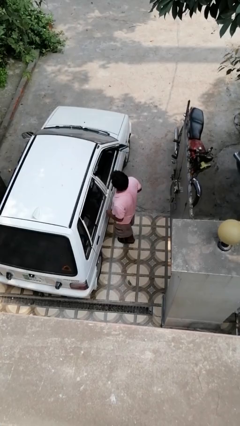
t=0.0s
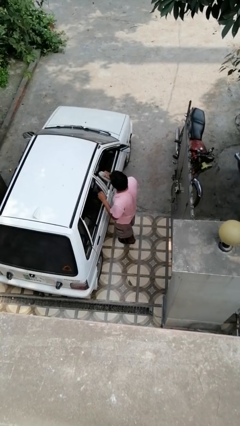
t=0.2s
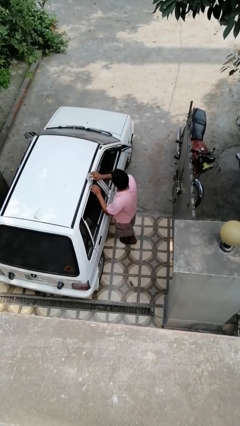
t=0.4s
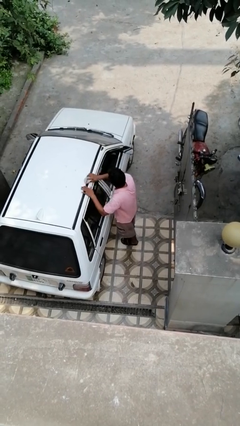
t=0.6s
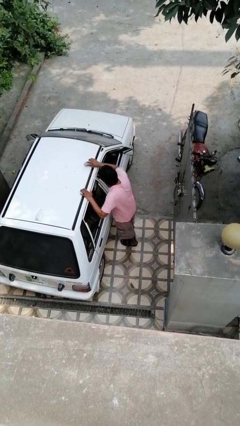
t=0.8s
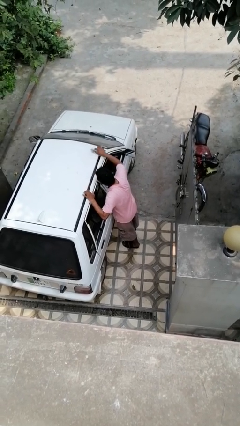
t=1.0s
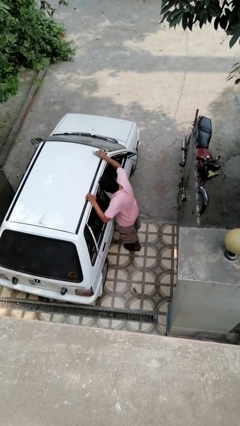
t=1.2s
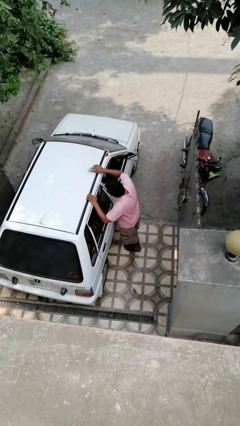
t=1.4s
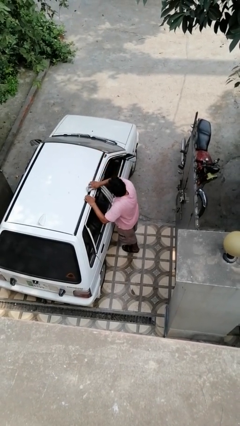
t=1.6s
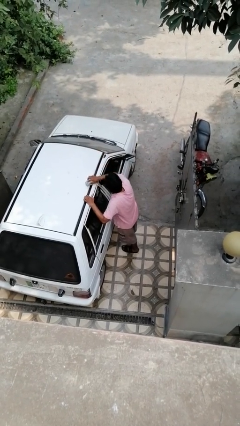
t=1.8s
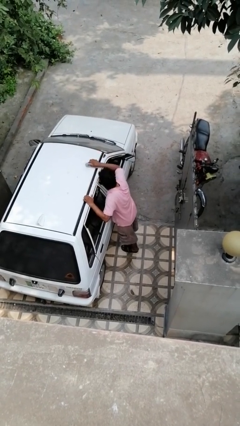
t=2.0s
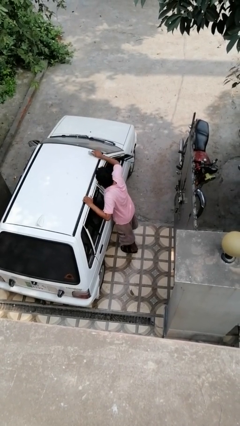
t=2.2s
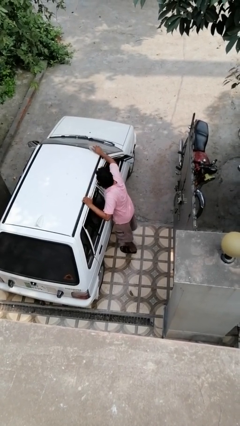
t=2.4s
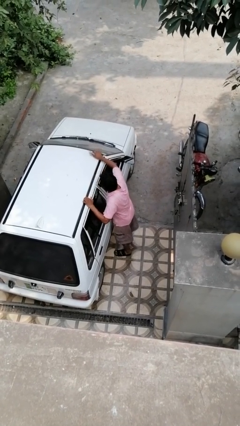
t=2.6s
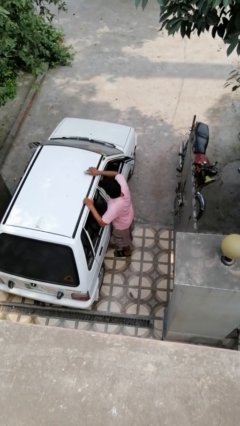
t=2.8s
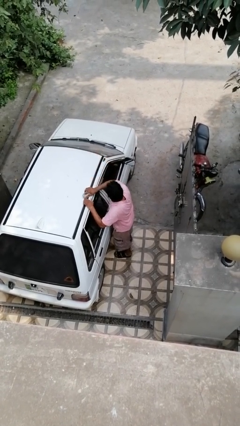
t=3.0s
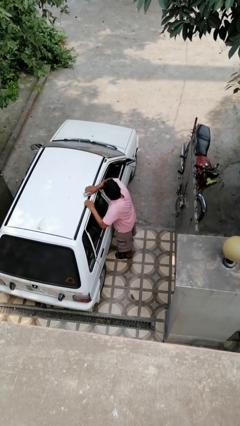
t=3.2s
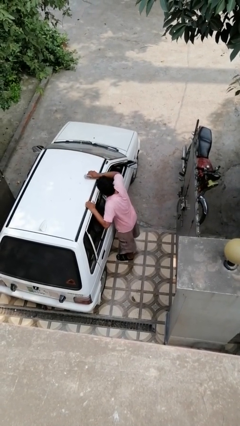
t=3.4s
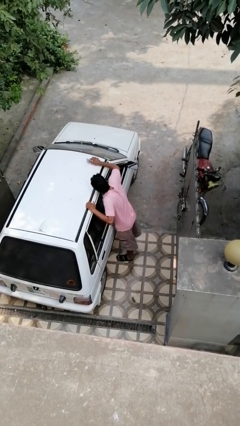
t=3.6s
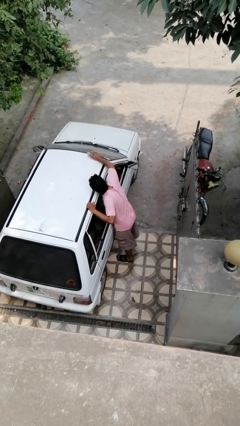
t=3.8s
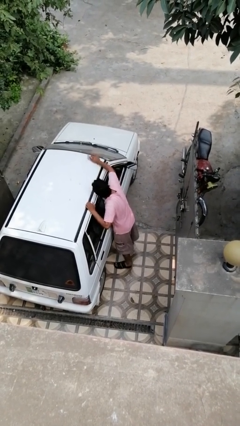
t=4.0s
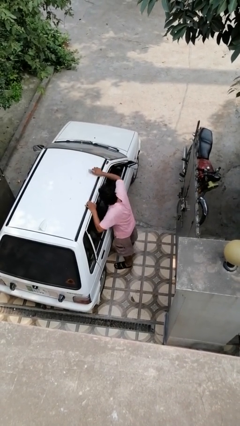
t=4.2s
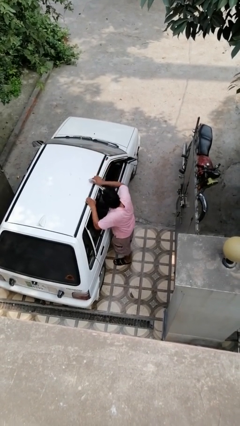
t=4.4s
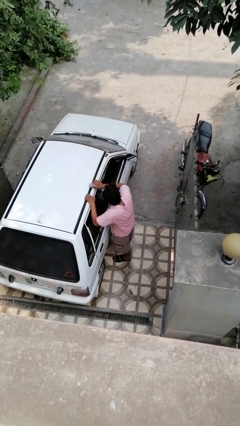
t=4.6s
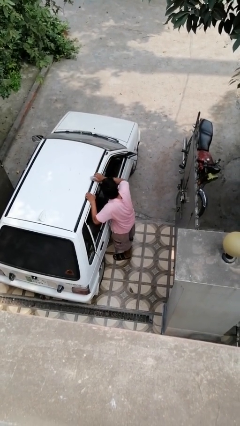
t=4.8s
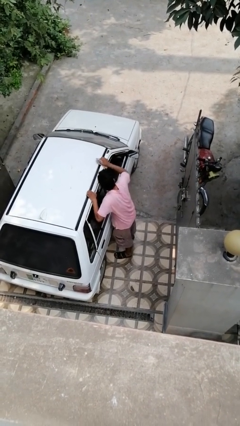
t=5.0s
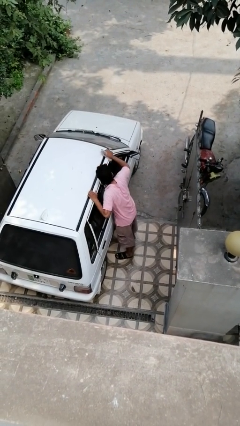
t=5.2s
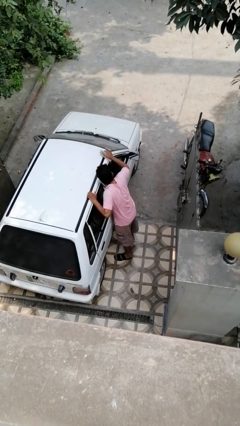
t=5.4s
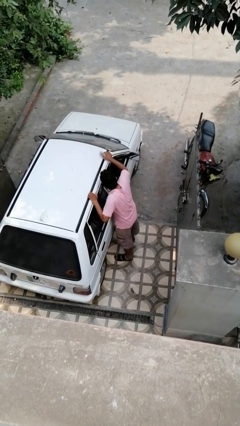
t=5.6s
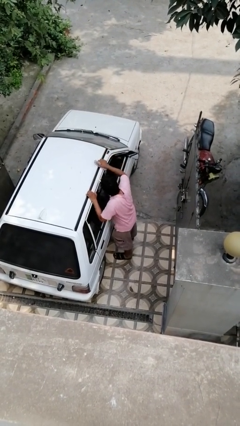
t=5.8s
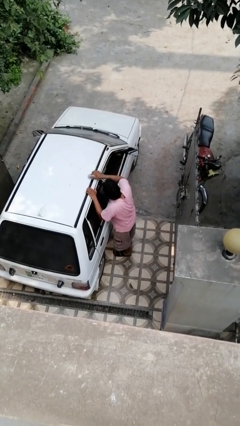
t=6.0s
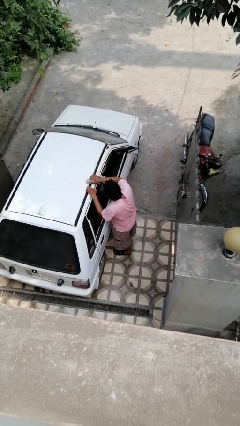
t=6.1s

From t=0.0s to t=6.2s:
person polishes car with rag

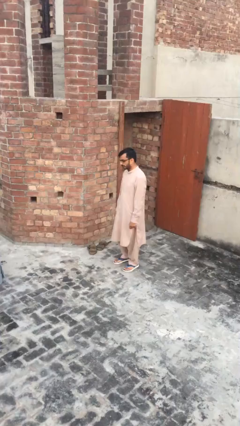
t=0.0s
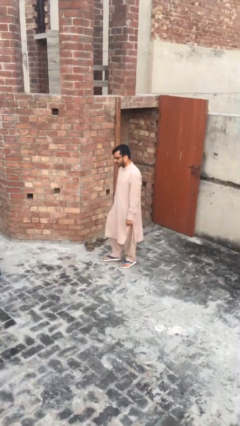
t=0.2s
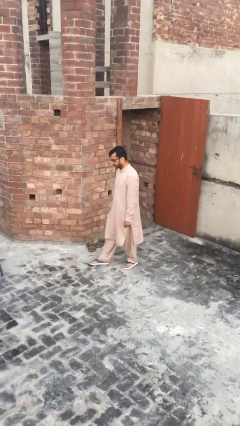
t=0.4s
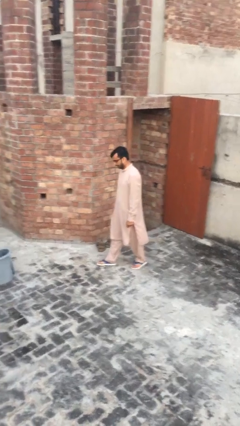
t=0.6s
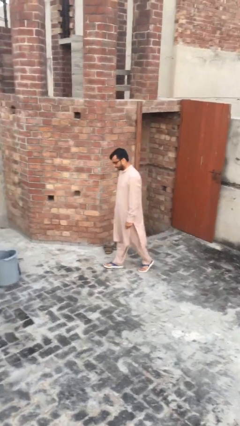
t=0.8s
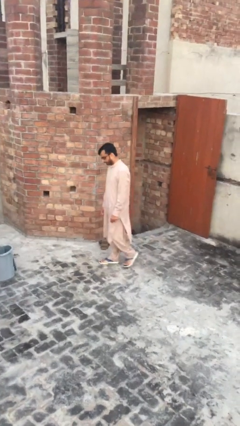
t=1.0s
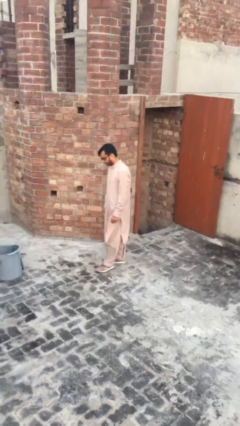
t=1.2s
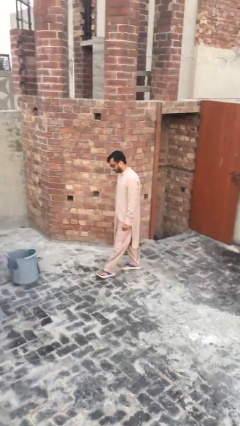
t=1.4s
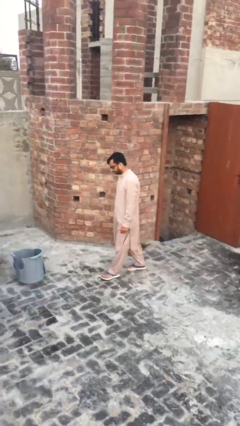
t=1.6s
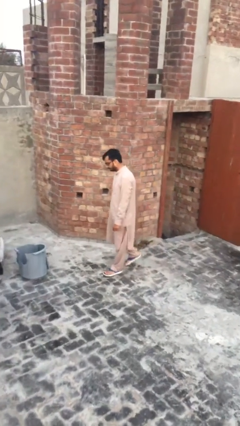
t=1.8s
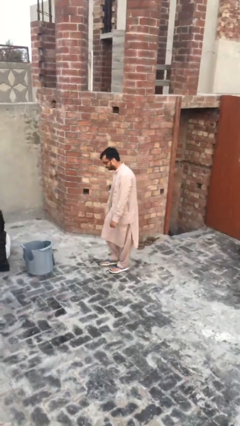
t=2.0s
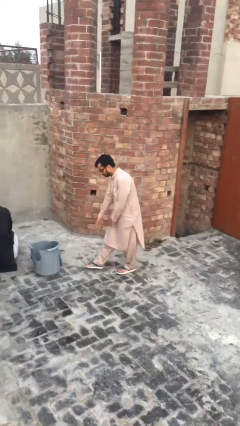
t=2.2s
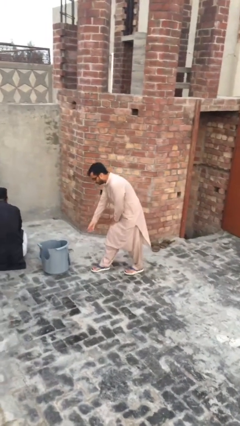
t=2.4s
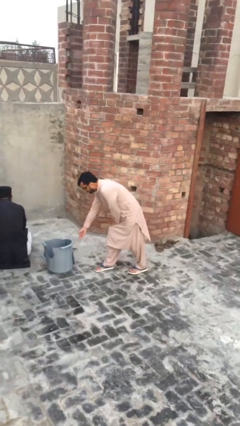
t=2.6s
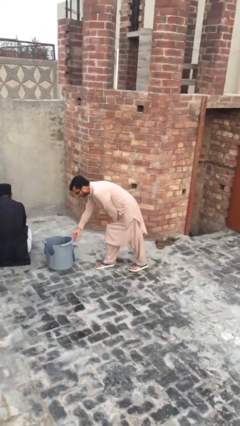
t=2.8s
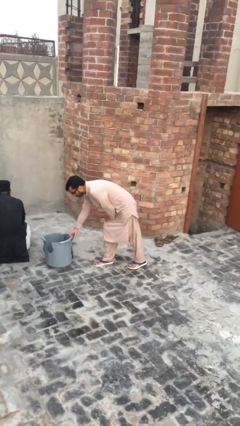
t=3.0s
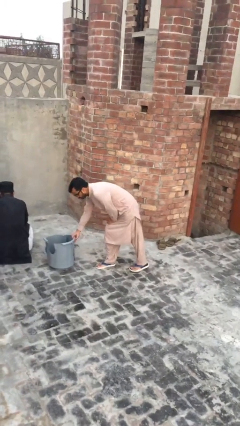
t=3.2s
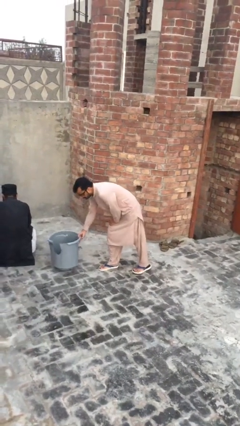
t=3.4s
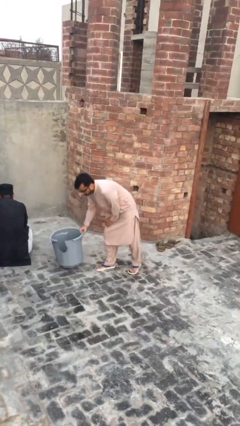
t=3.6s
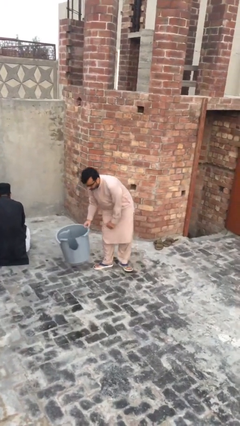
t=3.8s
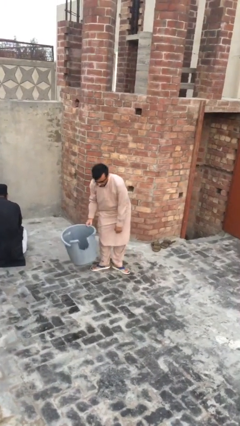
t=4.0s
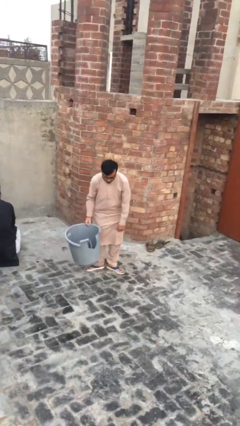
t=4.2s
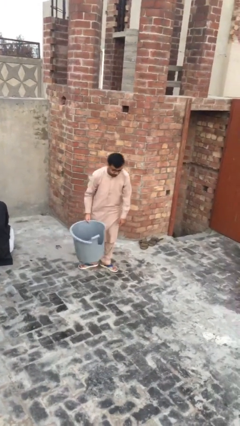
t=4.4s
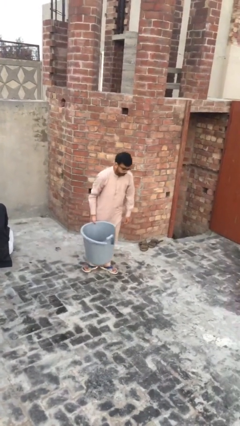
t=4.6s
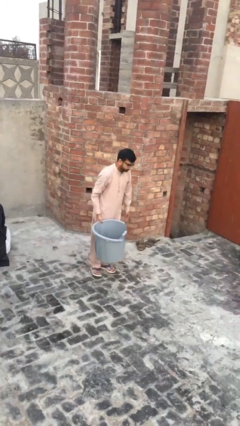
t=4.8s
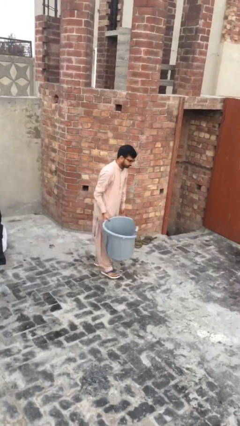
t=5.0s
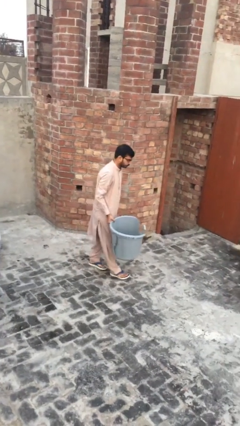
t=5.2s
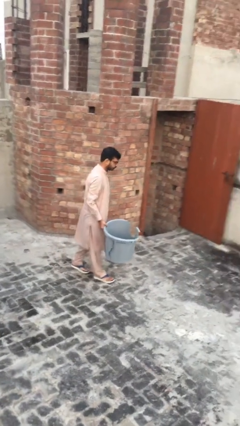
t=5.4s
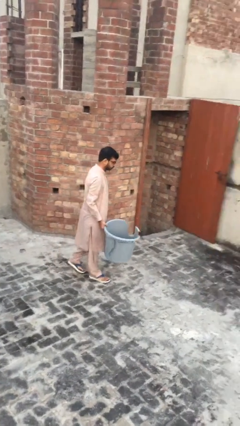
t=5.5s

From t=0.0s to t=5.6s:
person steals object from person

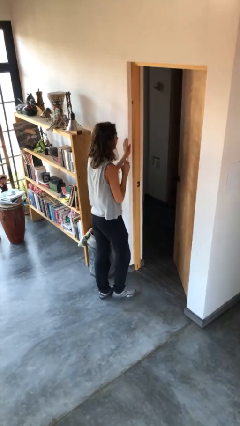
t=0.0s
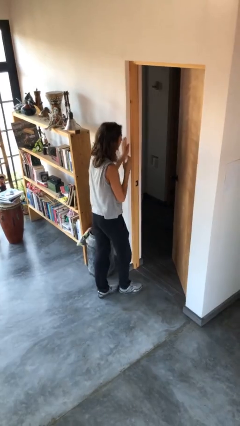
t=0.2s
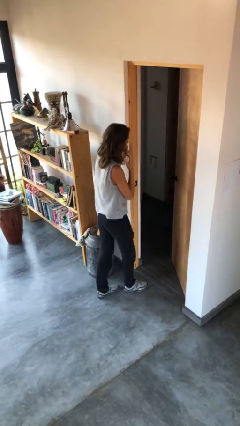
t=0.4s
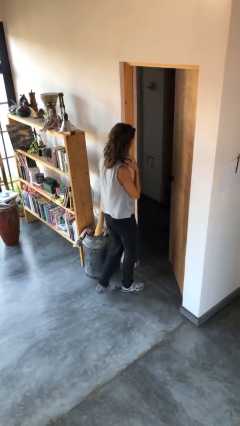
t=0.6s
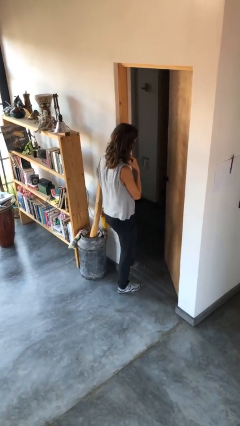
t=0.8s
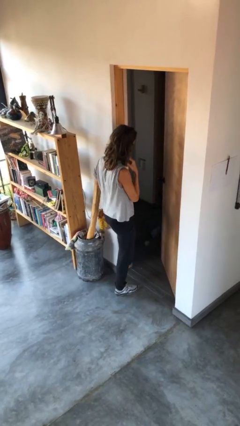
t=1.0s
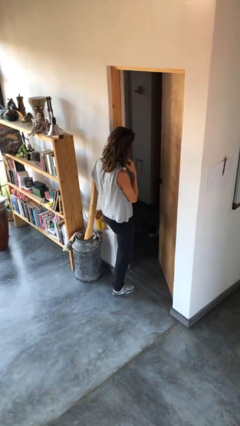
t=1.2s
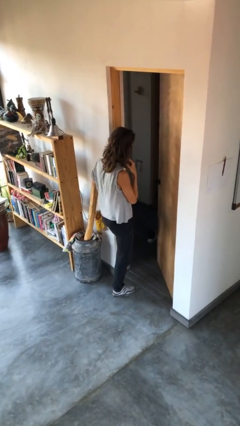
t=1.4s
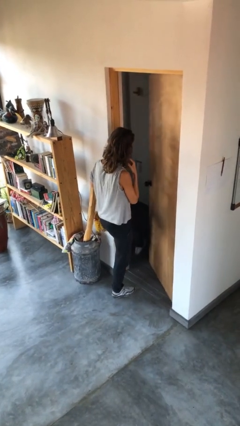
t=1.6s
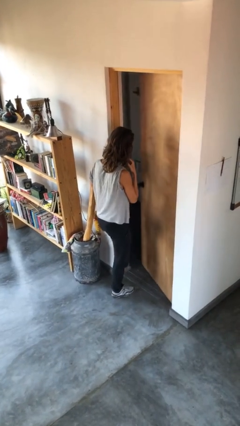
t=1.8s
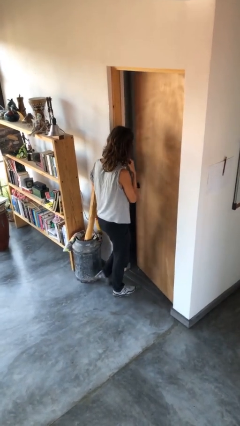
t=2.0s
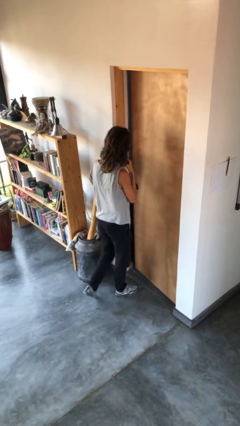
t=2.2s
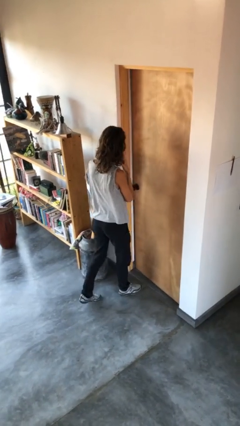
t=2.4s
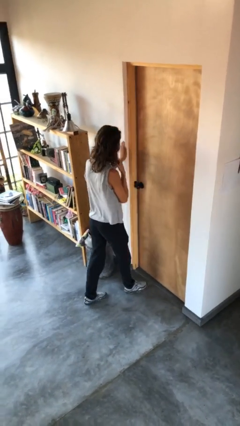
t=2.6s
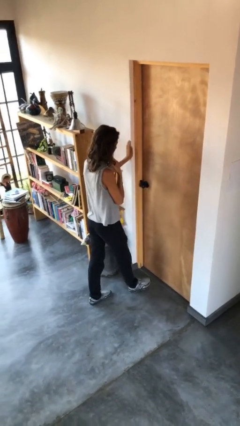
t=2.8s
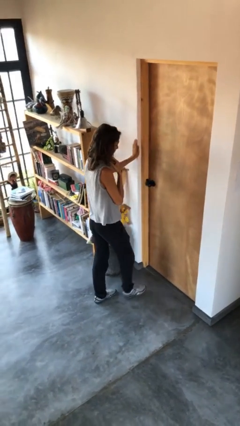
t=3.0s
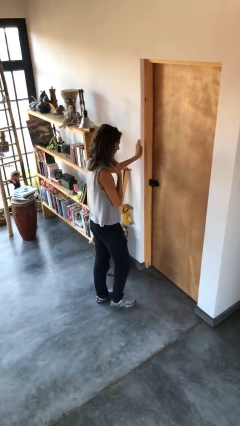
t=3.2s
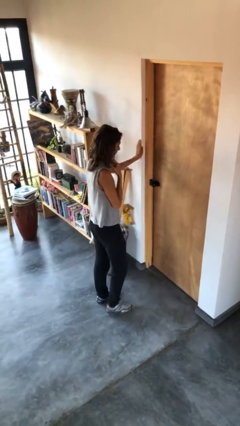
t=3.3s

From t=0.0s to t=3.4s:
person closes door with foot

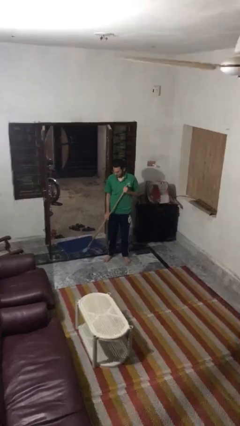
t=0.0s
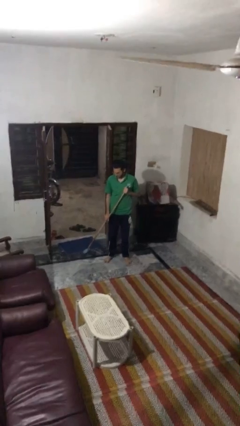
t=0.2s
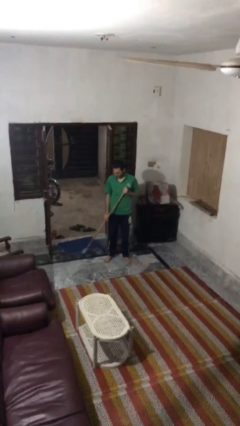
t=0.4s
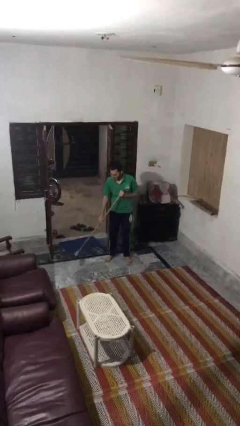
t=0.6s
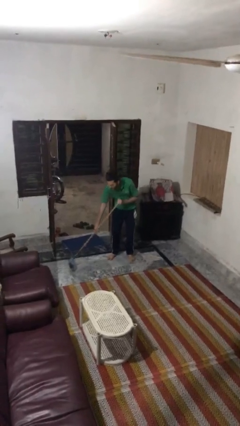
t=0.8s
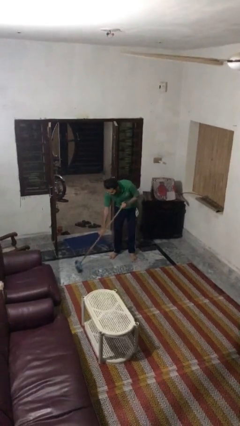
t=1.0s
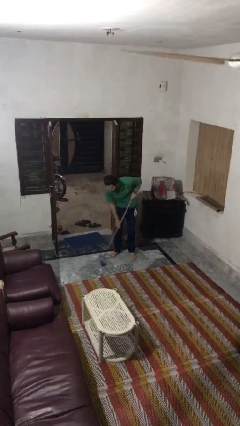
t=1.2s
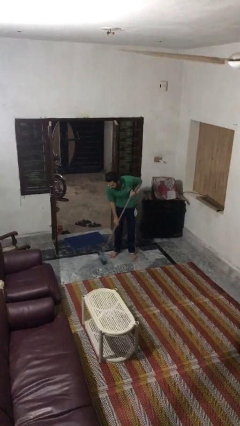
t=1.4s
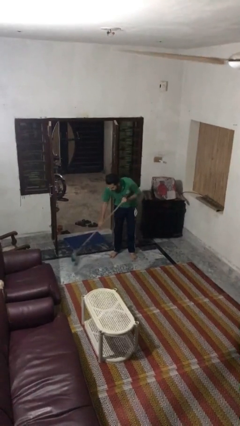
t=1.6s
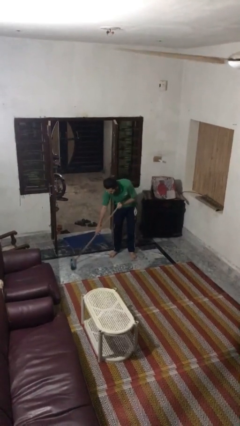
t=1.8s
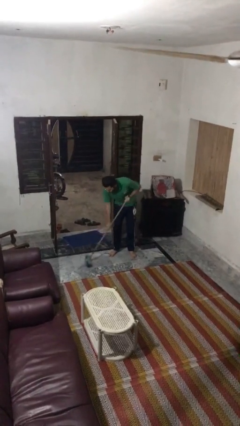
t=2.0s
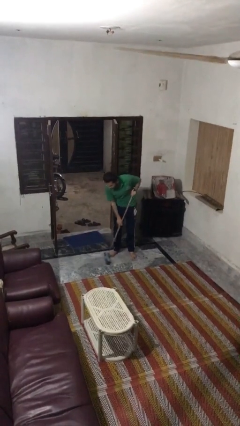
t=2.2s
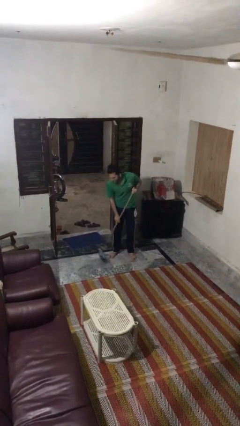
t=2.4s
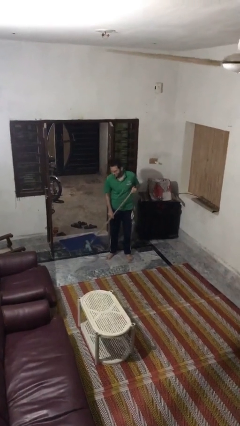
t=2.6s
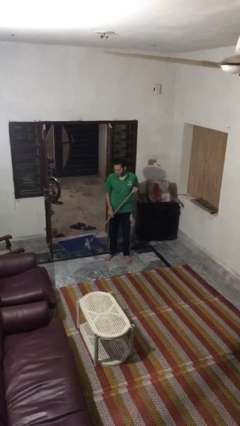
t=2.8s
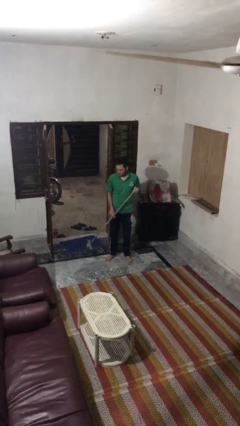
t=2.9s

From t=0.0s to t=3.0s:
person sweeps floor
